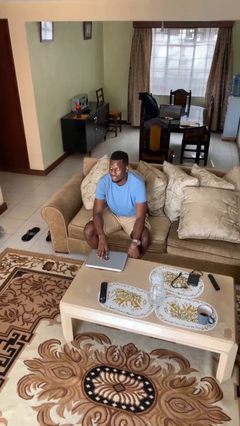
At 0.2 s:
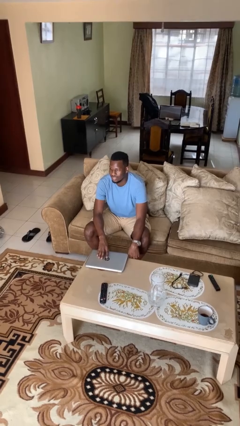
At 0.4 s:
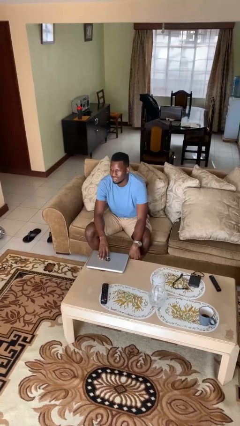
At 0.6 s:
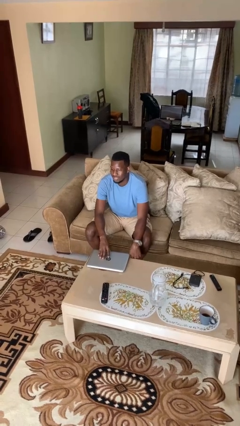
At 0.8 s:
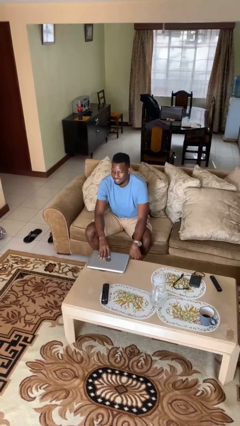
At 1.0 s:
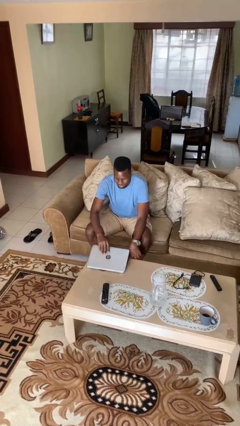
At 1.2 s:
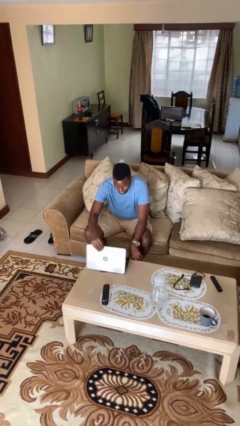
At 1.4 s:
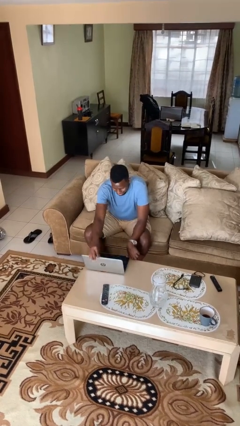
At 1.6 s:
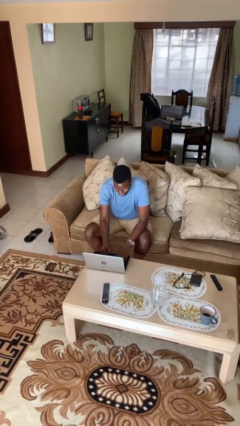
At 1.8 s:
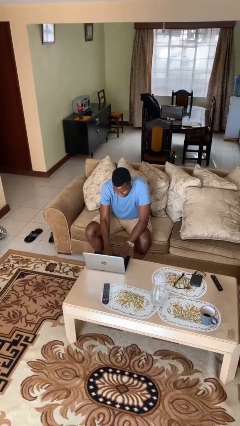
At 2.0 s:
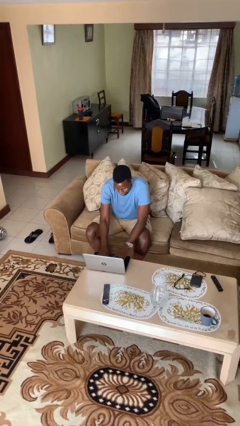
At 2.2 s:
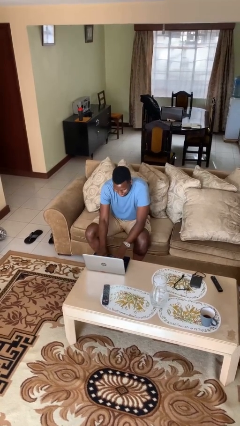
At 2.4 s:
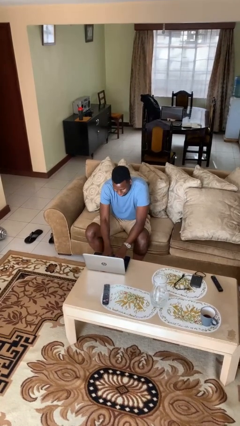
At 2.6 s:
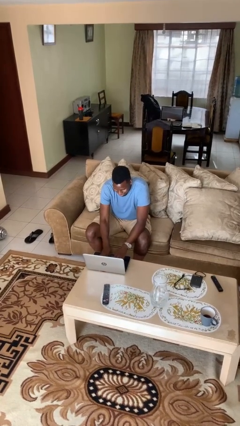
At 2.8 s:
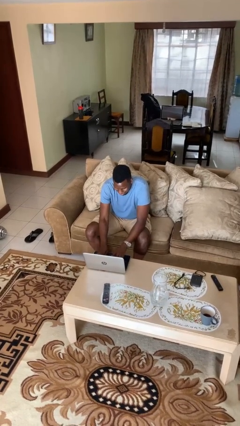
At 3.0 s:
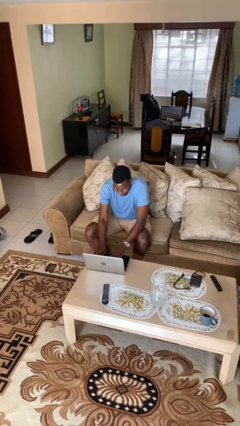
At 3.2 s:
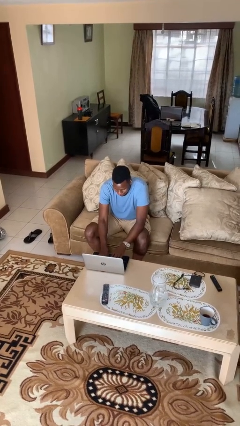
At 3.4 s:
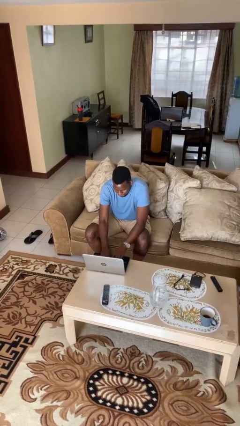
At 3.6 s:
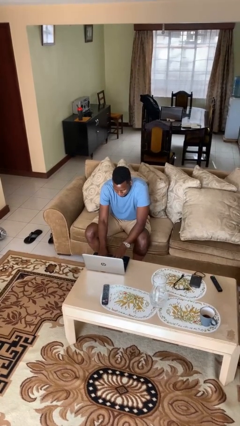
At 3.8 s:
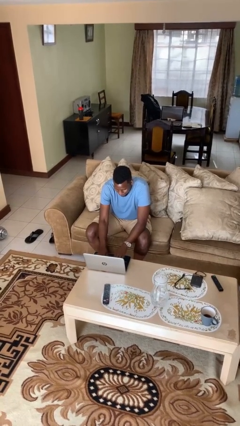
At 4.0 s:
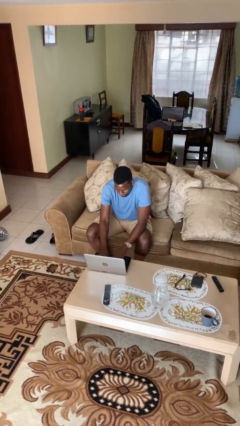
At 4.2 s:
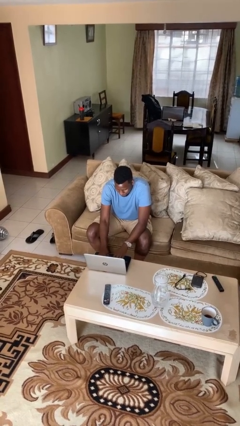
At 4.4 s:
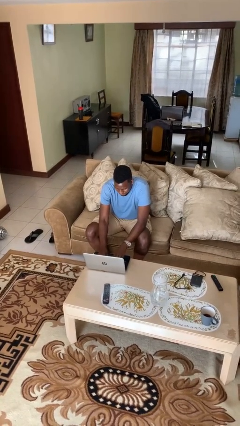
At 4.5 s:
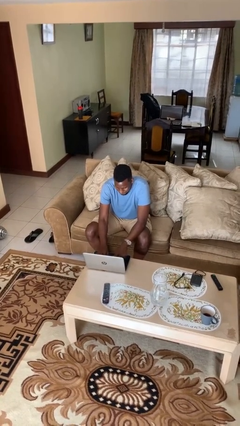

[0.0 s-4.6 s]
person interacts with laptop

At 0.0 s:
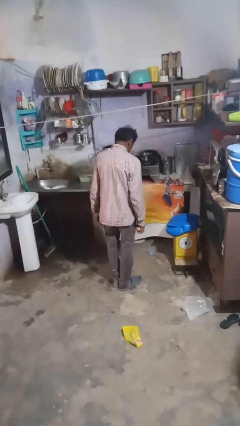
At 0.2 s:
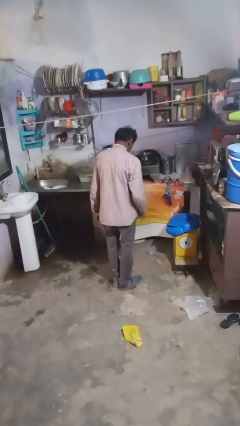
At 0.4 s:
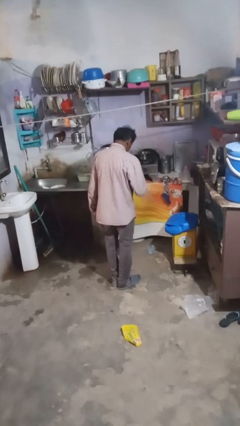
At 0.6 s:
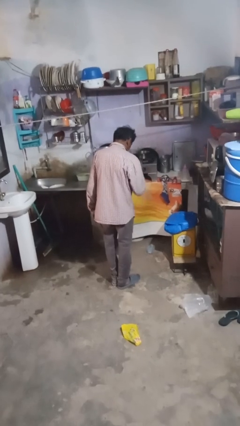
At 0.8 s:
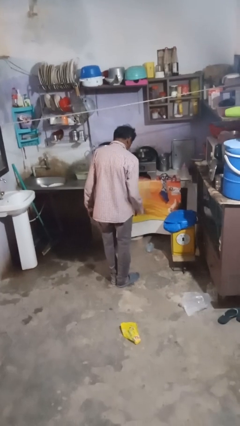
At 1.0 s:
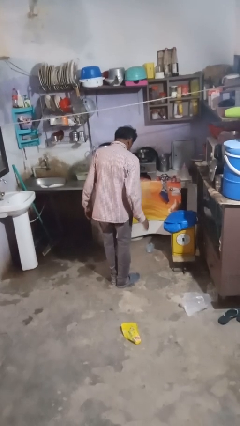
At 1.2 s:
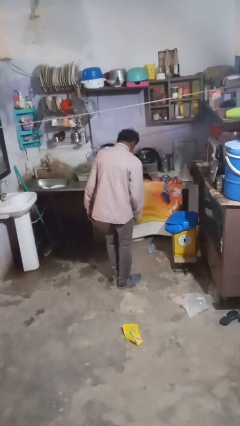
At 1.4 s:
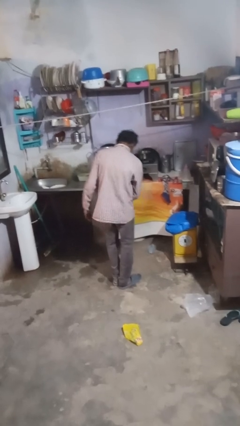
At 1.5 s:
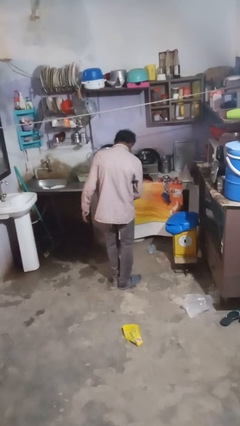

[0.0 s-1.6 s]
person bounces ball on floor

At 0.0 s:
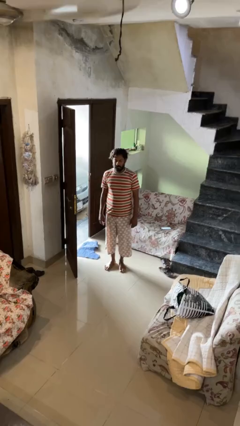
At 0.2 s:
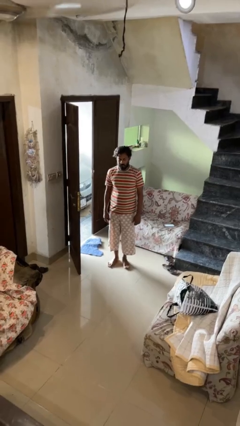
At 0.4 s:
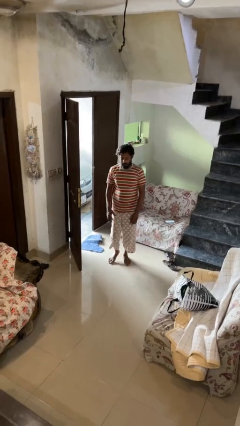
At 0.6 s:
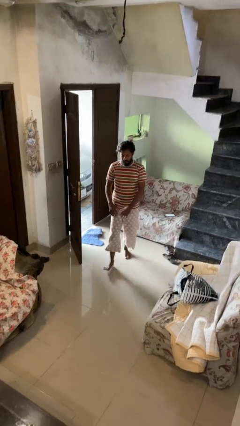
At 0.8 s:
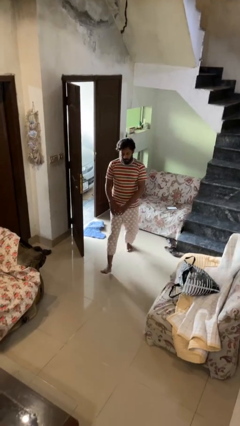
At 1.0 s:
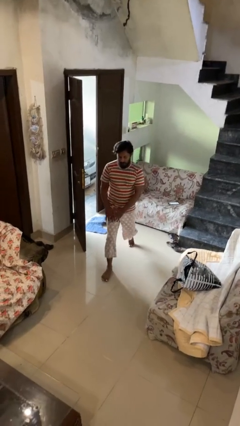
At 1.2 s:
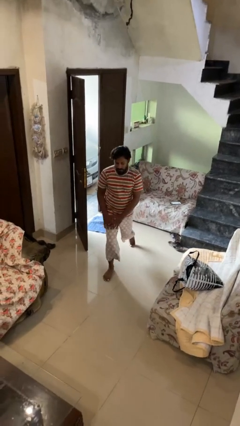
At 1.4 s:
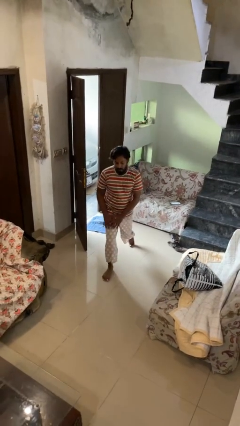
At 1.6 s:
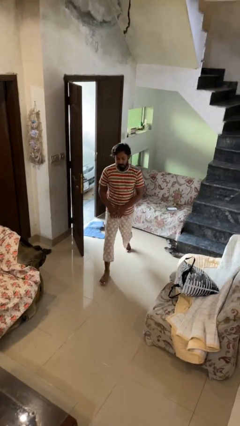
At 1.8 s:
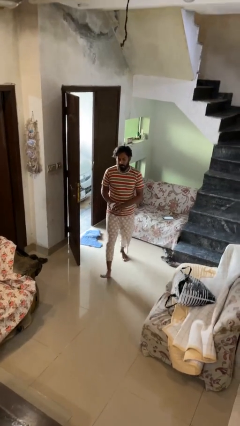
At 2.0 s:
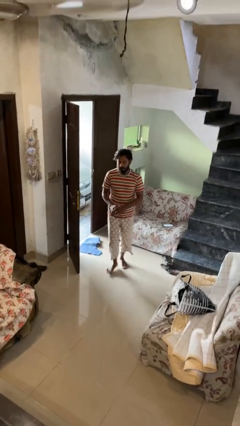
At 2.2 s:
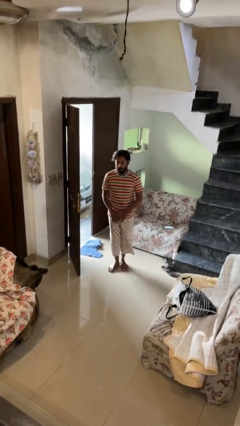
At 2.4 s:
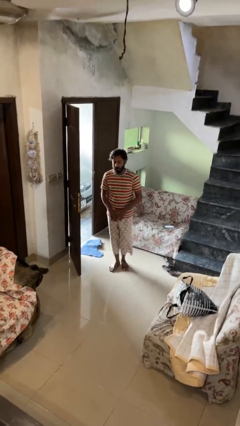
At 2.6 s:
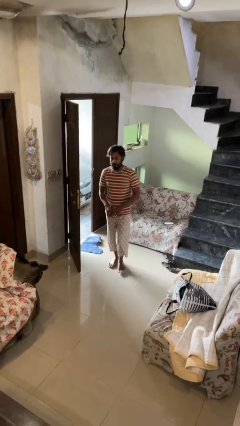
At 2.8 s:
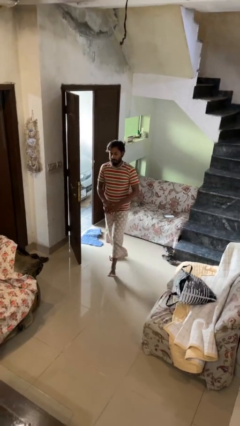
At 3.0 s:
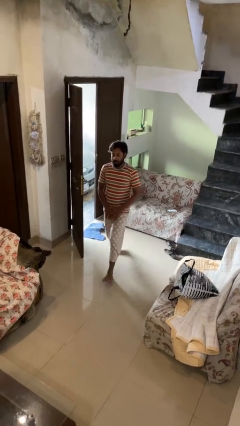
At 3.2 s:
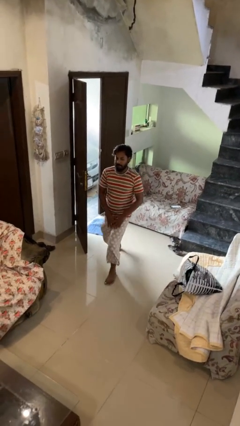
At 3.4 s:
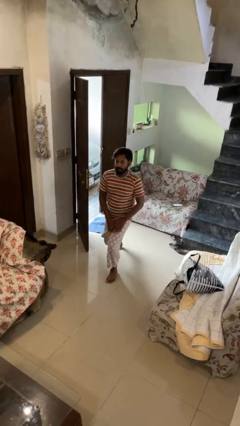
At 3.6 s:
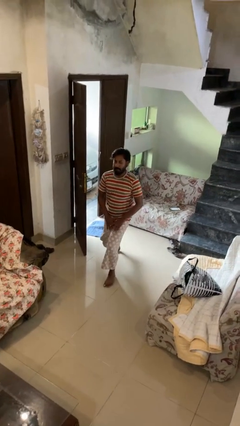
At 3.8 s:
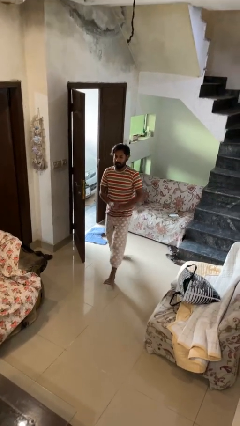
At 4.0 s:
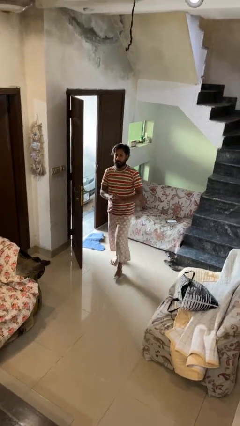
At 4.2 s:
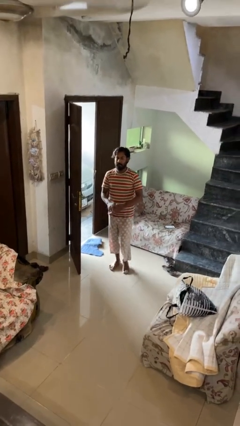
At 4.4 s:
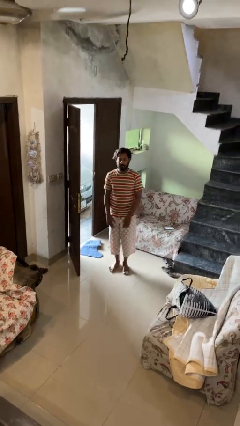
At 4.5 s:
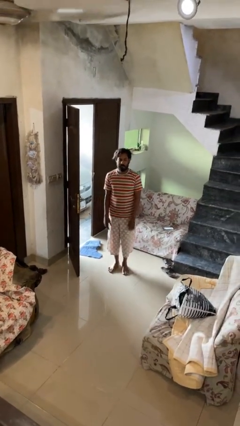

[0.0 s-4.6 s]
person exercises with lunges

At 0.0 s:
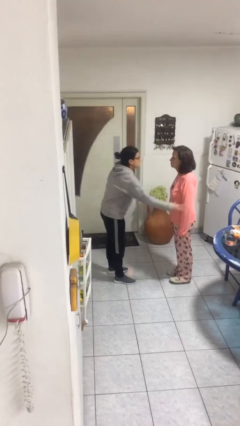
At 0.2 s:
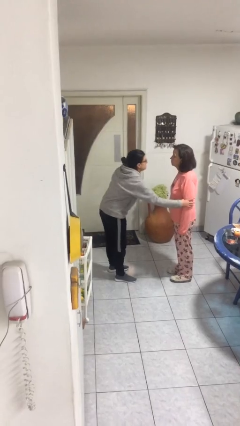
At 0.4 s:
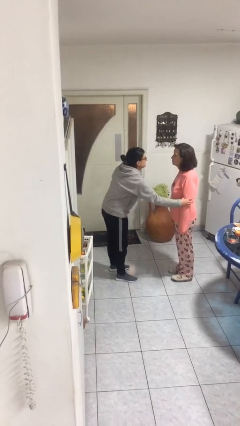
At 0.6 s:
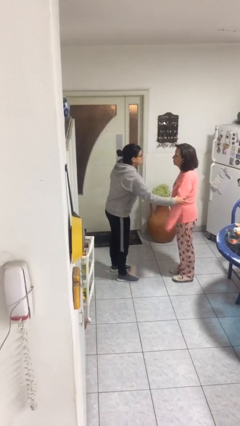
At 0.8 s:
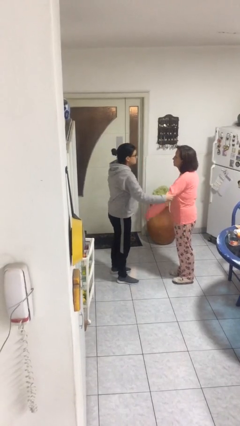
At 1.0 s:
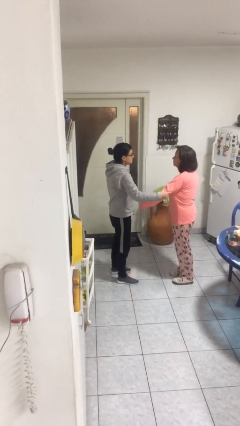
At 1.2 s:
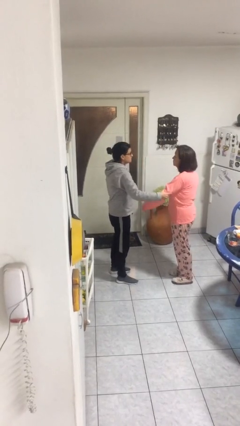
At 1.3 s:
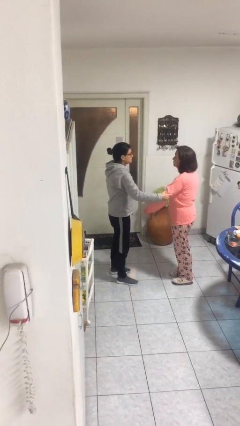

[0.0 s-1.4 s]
person grabs person by bicep

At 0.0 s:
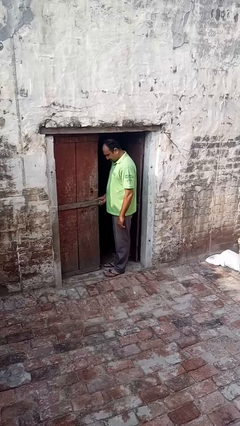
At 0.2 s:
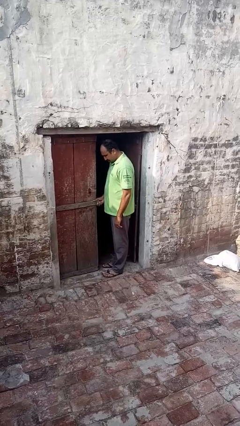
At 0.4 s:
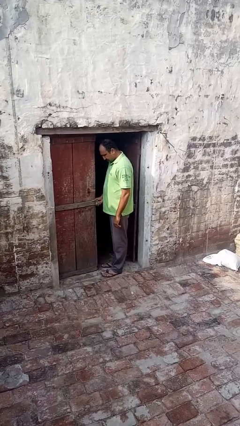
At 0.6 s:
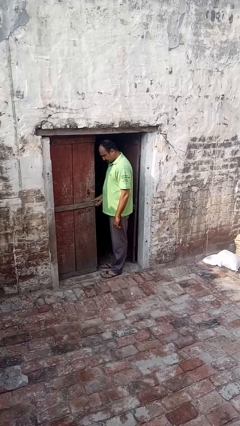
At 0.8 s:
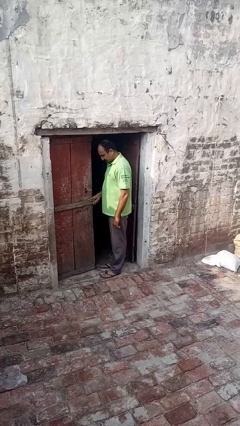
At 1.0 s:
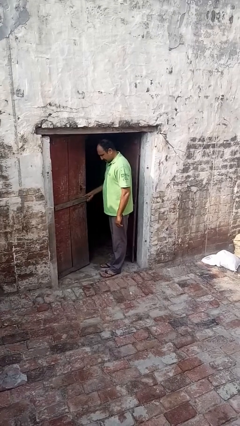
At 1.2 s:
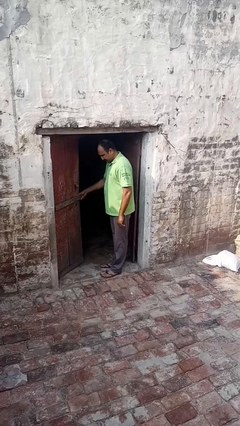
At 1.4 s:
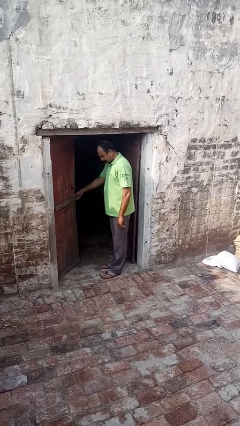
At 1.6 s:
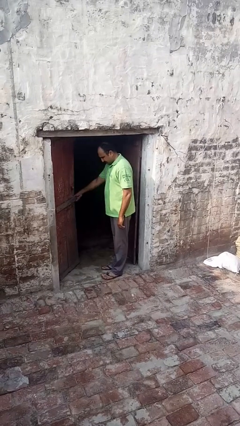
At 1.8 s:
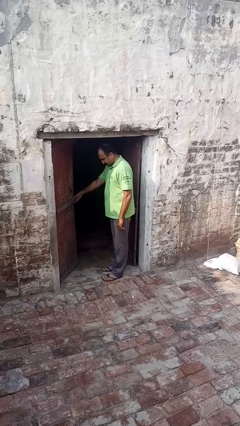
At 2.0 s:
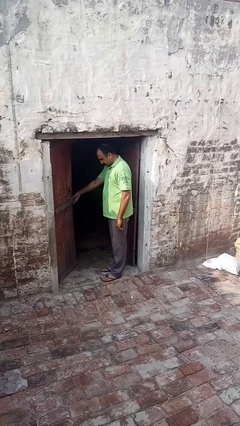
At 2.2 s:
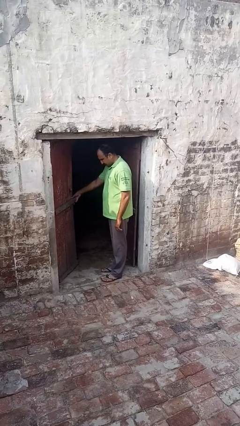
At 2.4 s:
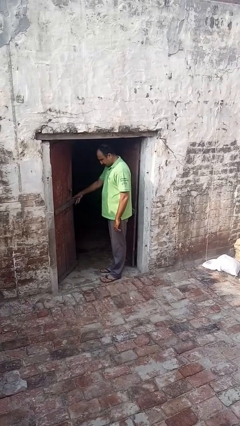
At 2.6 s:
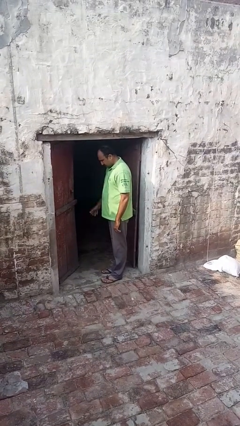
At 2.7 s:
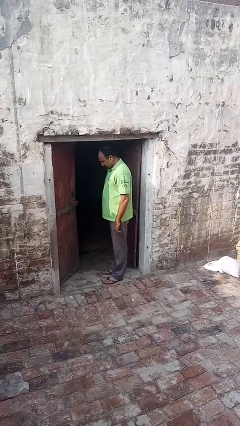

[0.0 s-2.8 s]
person opens facility door

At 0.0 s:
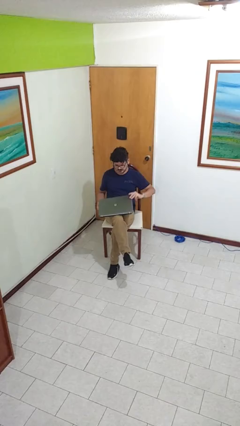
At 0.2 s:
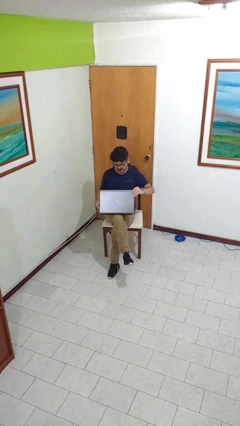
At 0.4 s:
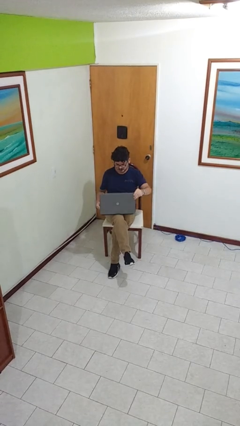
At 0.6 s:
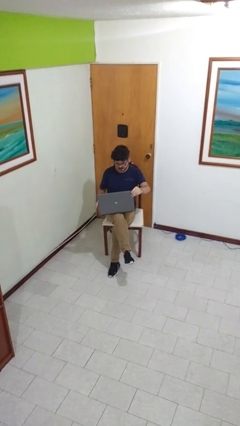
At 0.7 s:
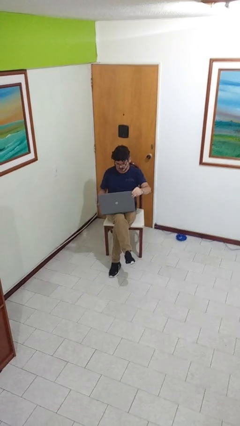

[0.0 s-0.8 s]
person opens laptop

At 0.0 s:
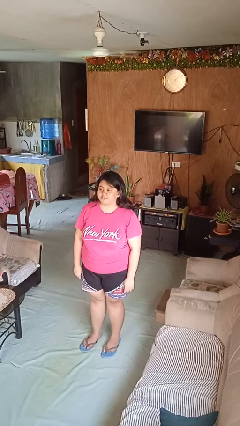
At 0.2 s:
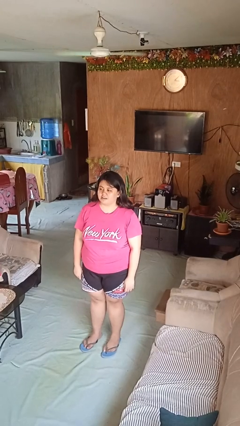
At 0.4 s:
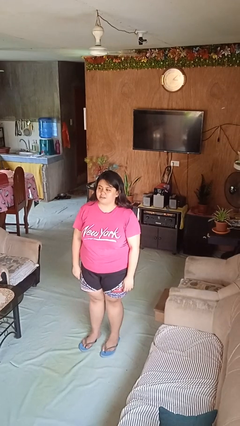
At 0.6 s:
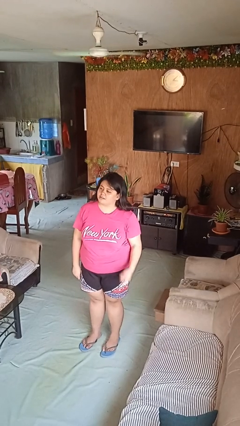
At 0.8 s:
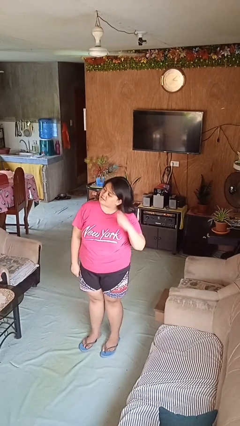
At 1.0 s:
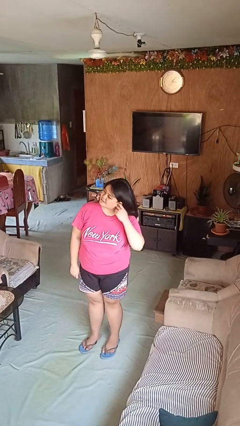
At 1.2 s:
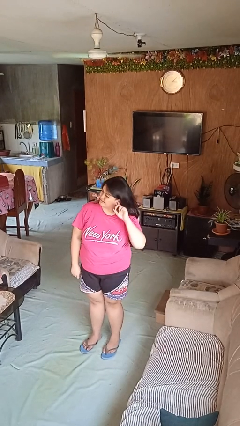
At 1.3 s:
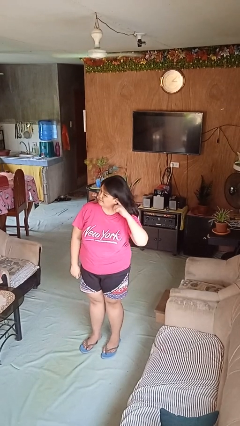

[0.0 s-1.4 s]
person touches earlobe
